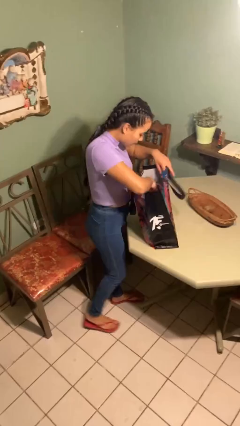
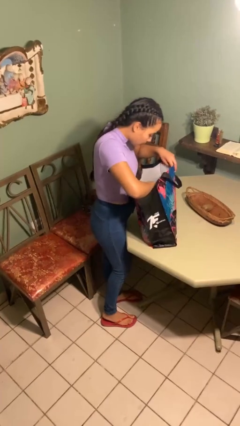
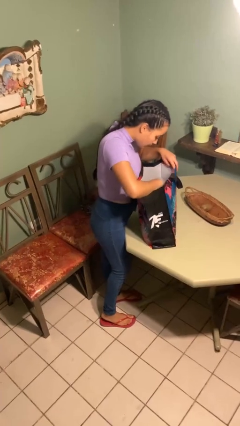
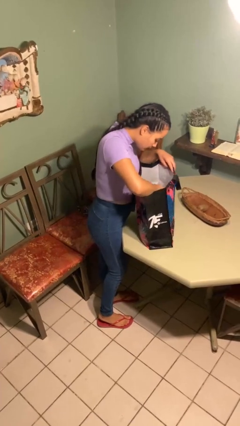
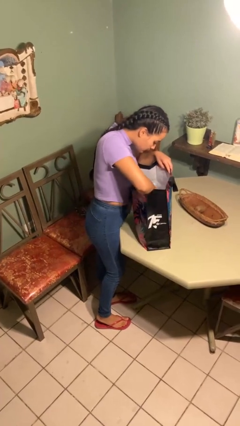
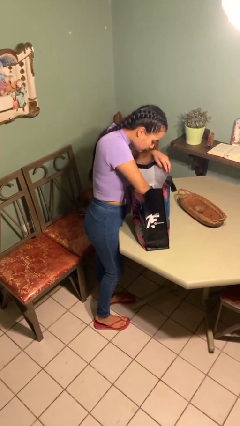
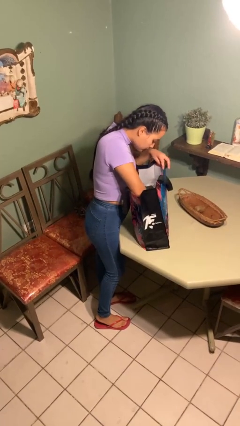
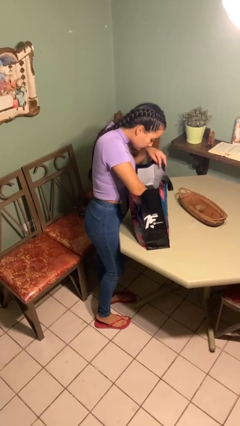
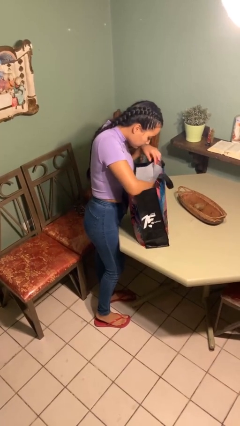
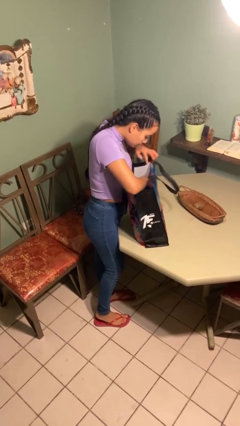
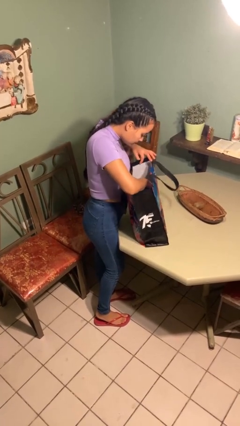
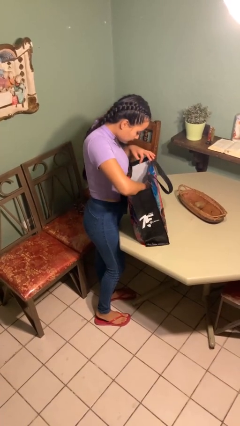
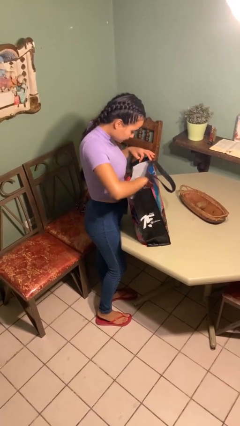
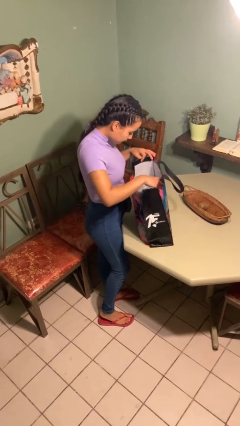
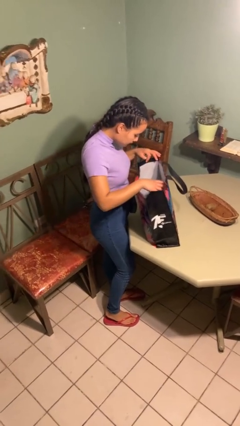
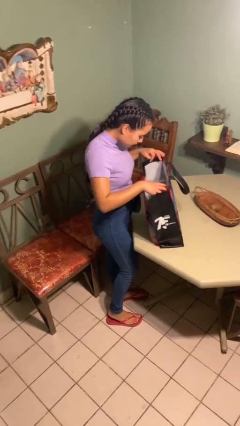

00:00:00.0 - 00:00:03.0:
person searches in bag

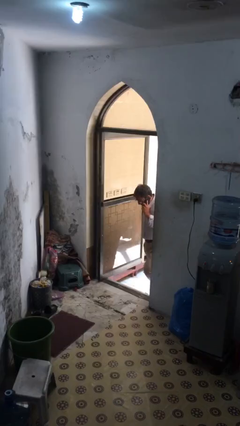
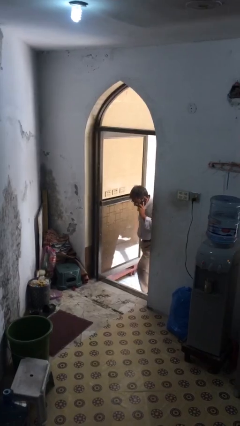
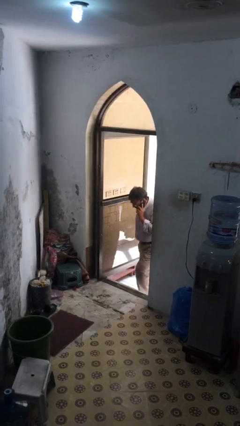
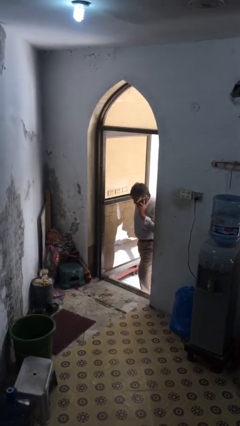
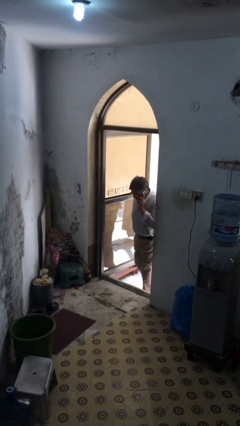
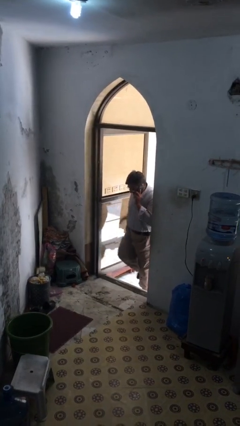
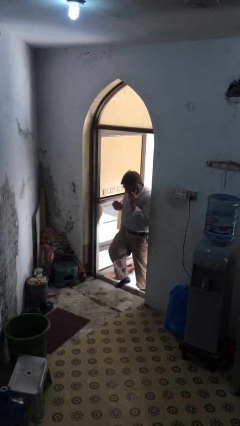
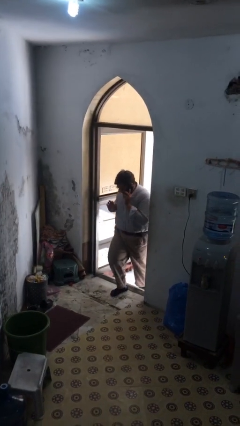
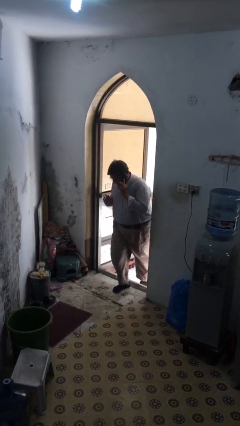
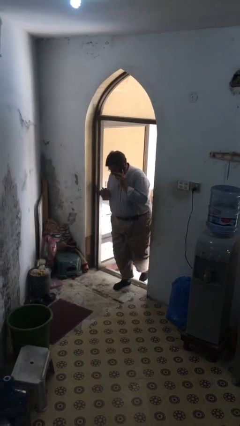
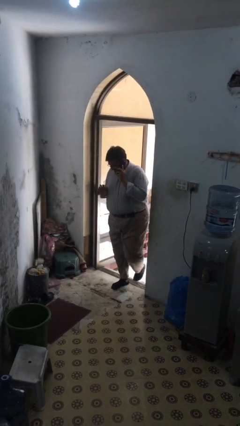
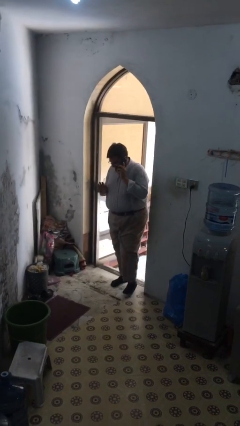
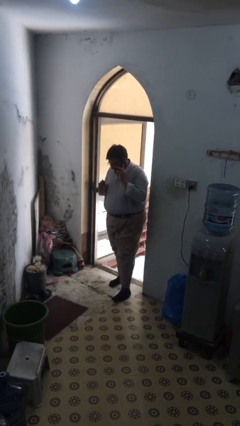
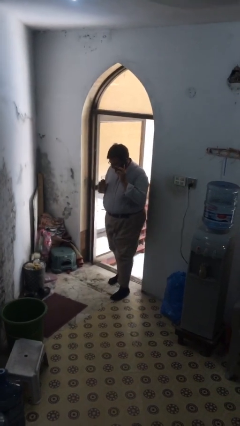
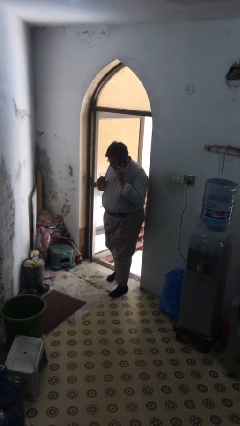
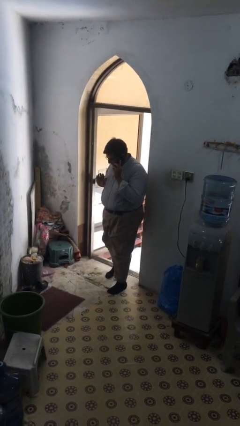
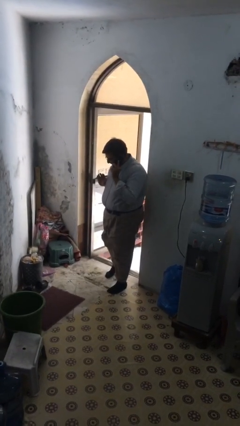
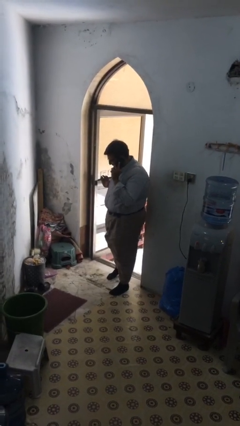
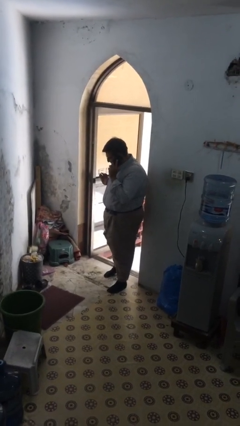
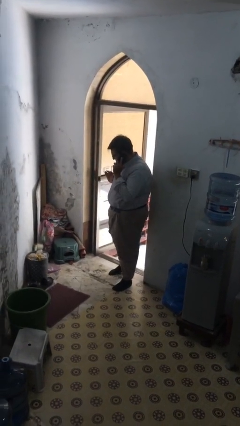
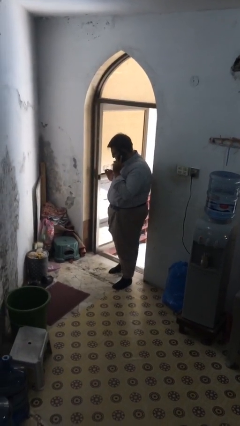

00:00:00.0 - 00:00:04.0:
person enters scene through structure

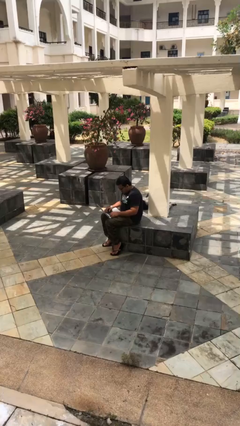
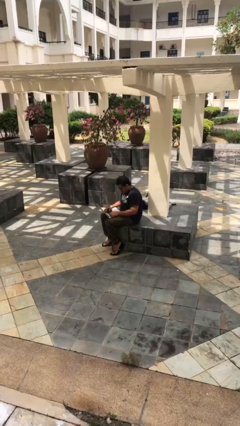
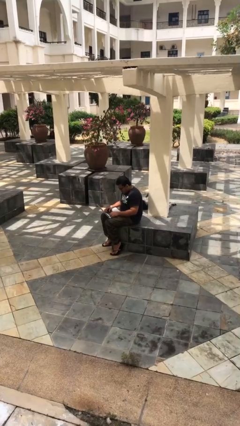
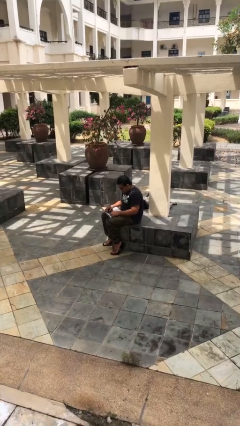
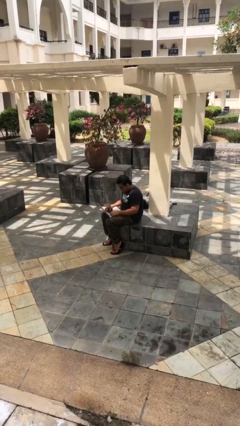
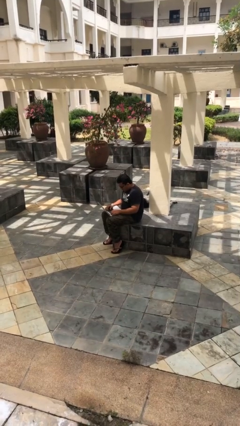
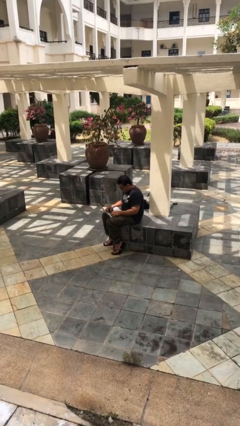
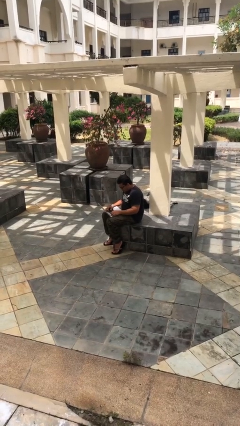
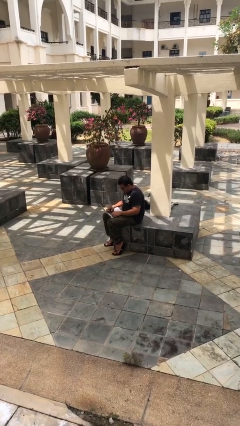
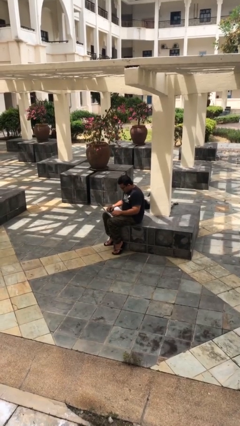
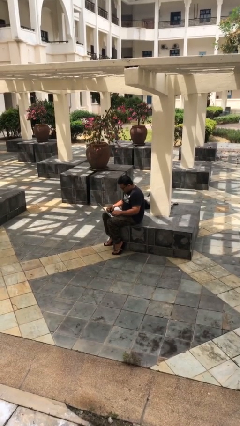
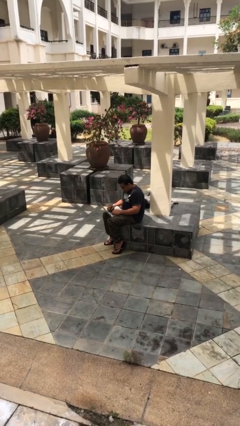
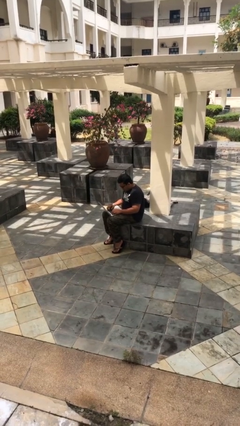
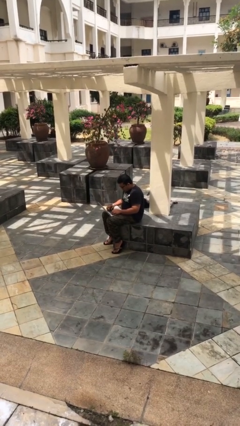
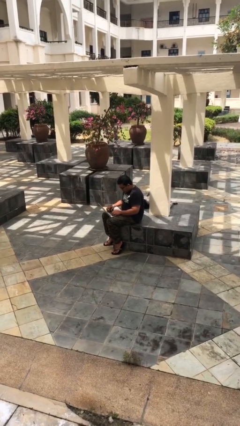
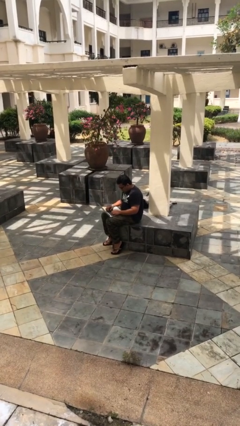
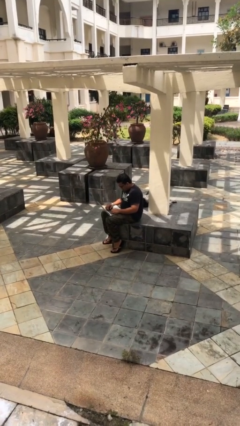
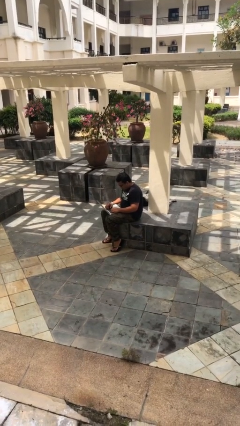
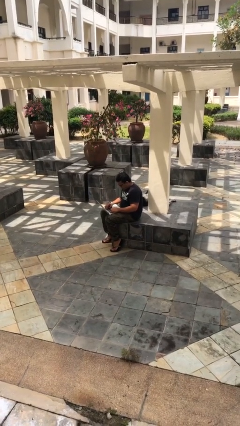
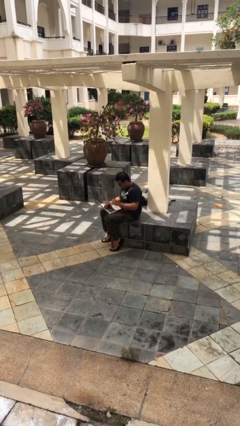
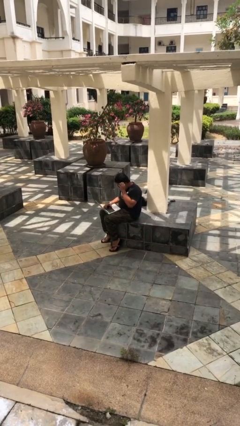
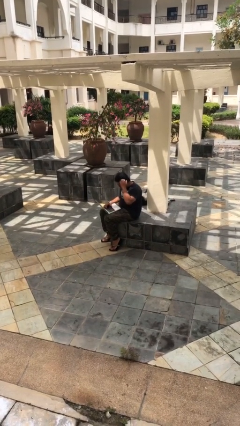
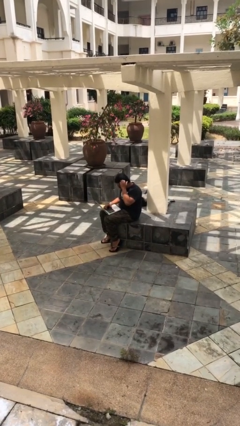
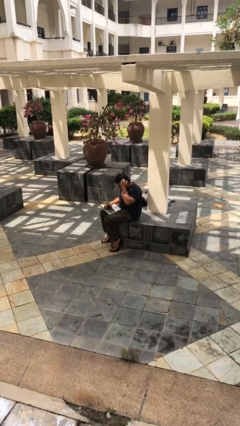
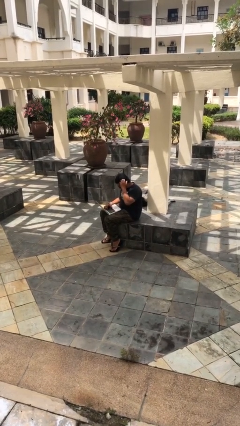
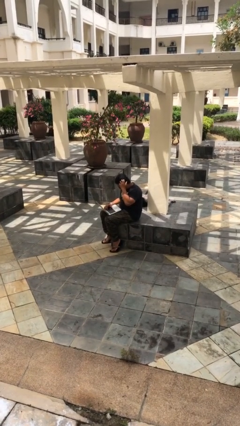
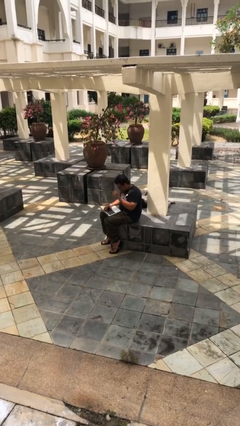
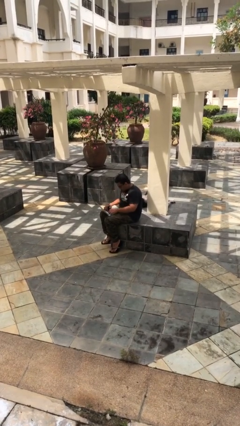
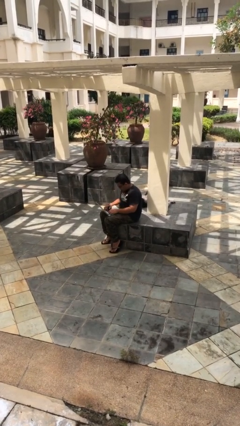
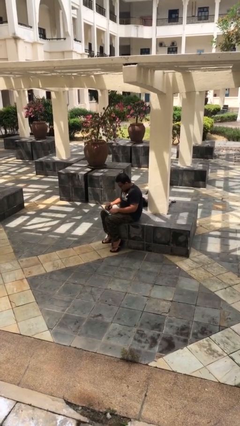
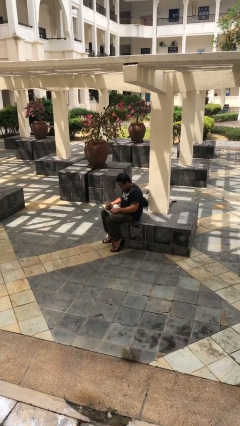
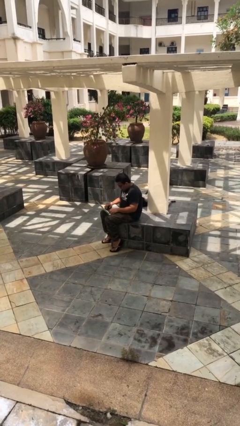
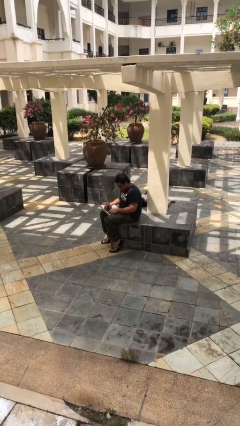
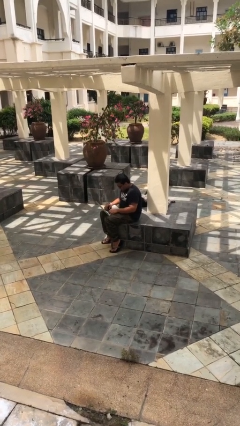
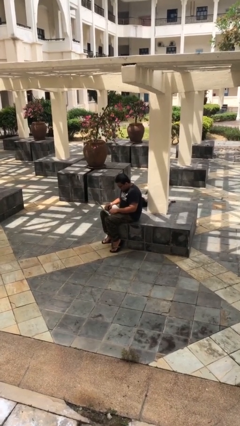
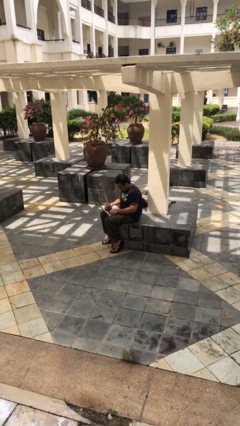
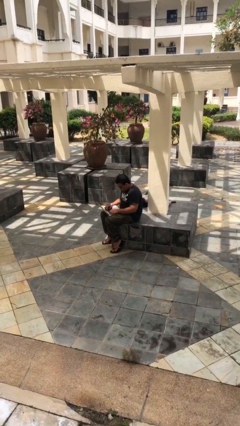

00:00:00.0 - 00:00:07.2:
person interacts with laptop

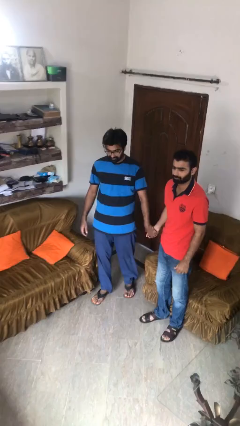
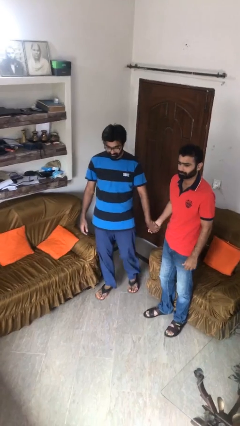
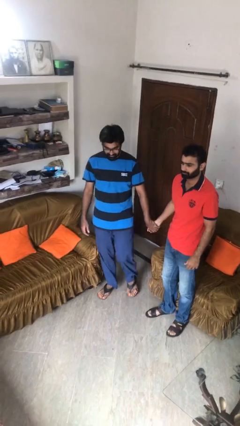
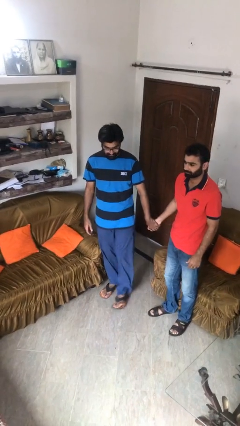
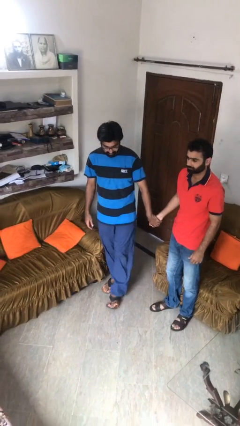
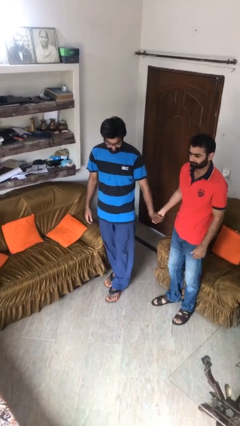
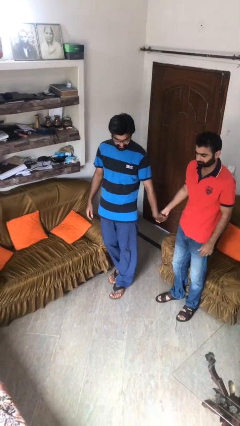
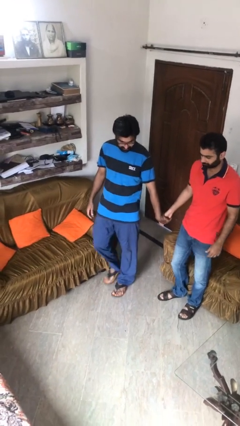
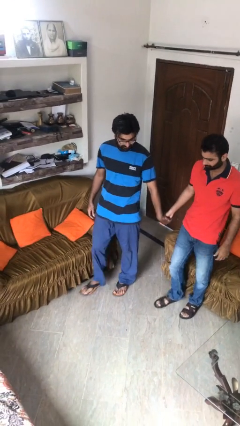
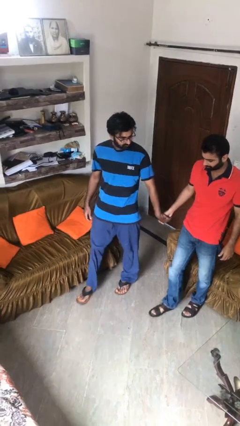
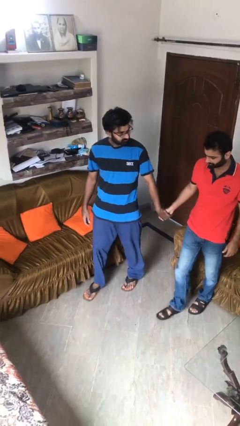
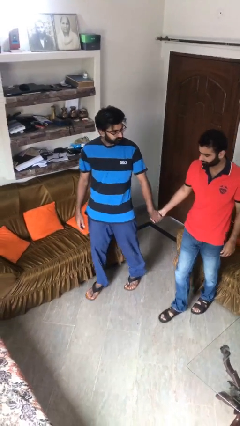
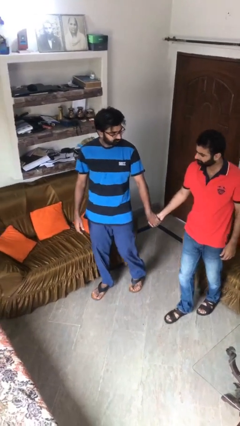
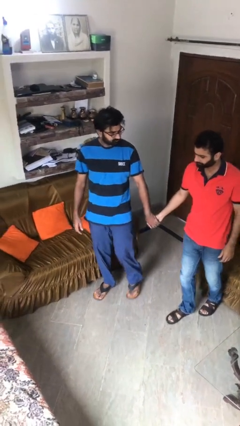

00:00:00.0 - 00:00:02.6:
person holds hand

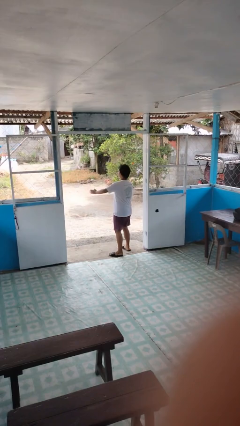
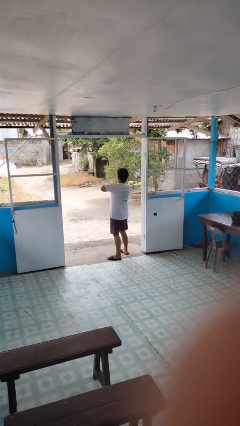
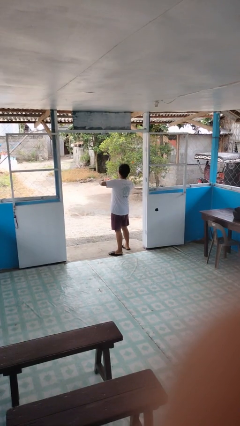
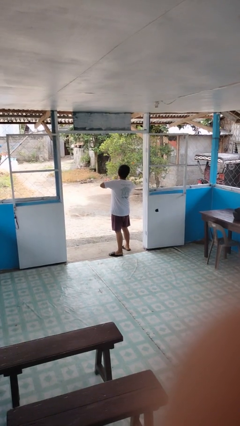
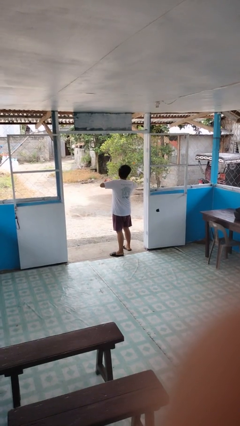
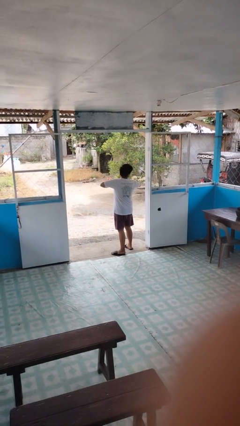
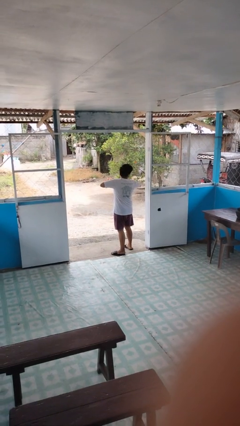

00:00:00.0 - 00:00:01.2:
person drums on chest
